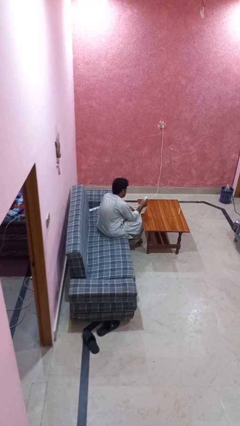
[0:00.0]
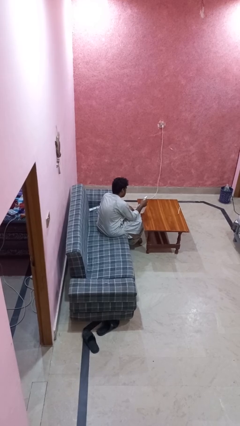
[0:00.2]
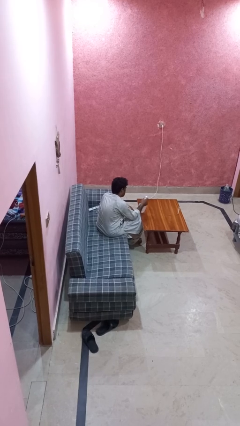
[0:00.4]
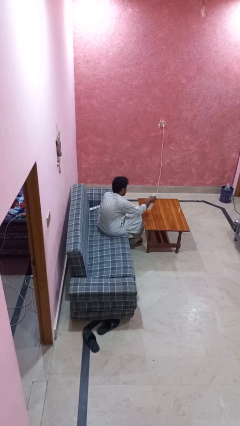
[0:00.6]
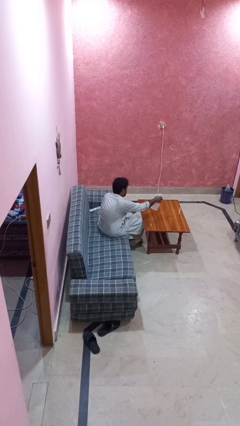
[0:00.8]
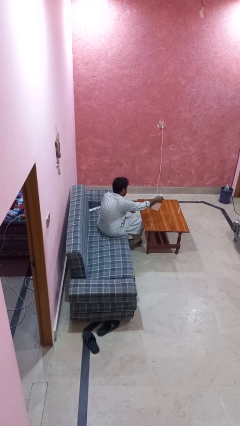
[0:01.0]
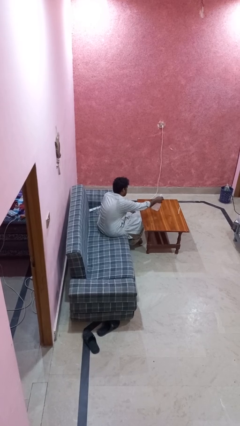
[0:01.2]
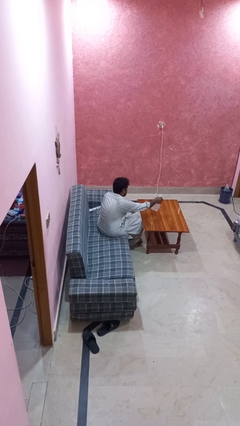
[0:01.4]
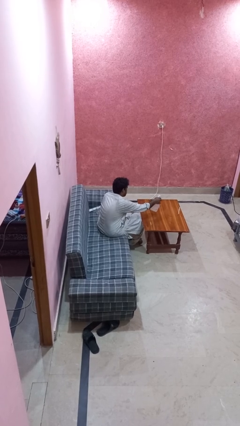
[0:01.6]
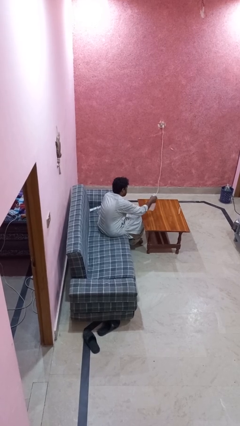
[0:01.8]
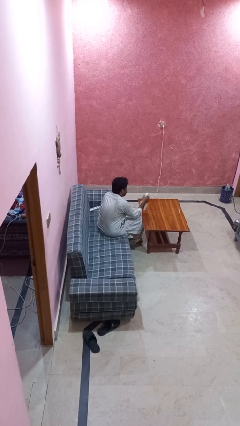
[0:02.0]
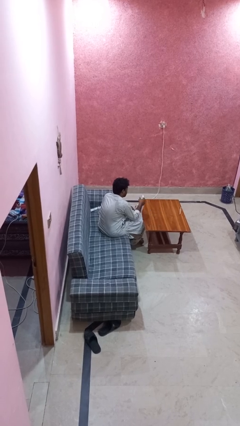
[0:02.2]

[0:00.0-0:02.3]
person sprays from bottle

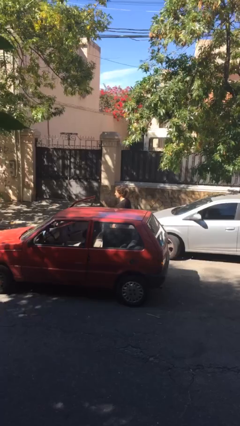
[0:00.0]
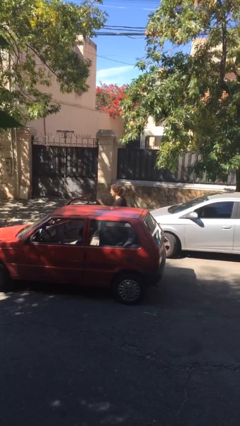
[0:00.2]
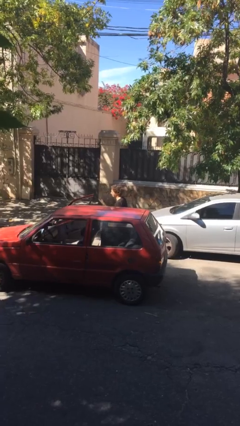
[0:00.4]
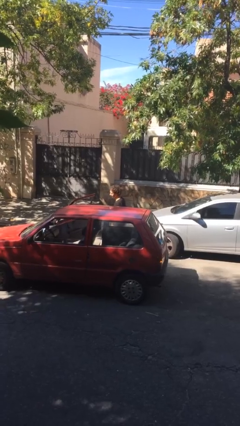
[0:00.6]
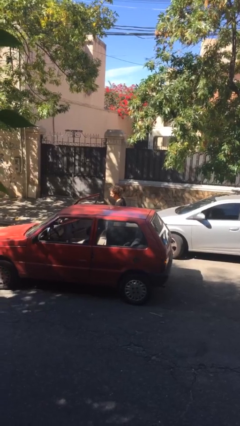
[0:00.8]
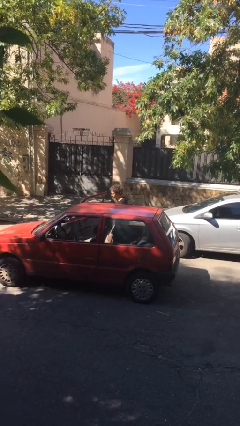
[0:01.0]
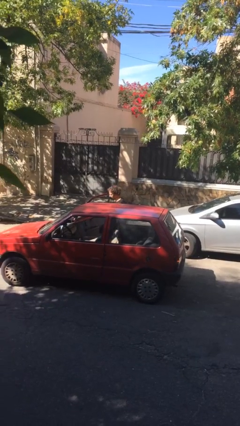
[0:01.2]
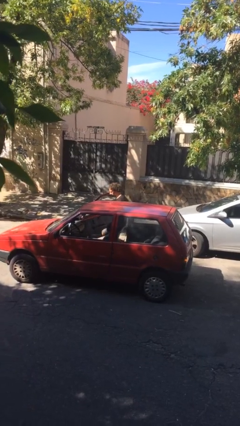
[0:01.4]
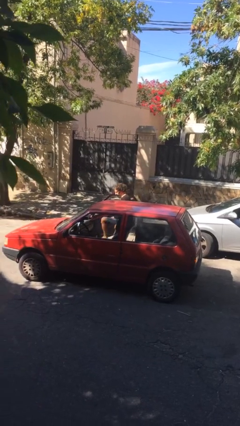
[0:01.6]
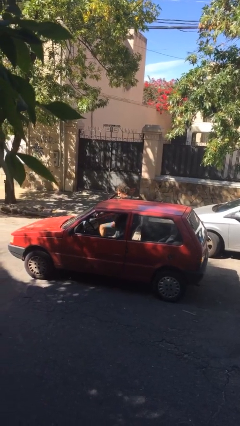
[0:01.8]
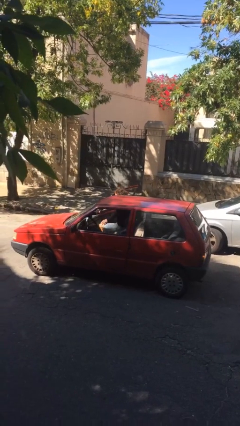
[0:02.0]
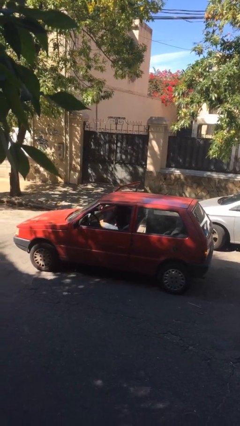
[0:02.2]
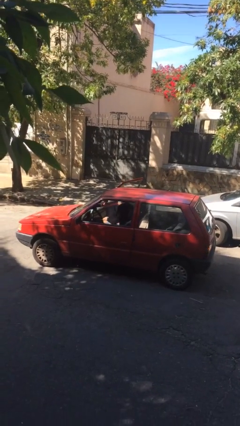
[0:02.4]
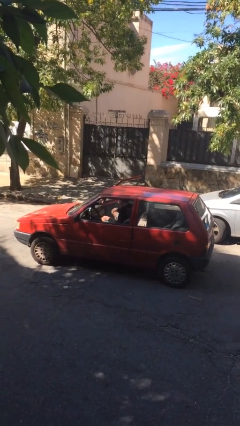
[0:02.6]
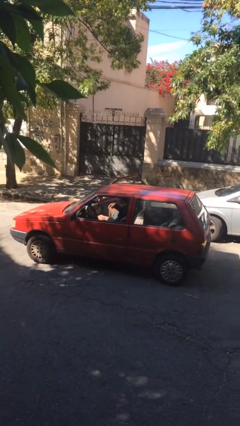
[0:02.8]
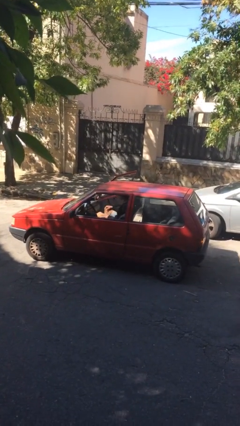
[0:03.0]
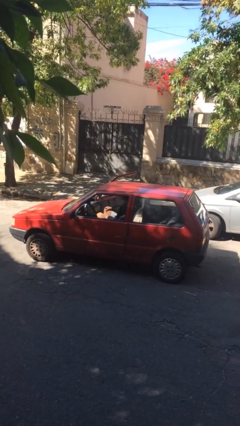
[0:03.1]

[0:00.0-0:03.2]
person enters car

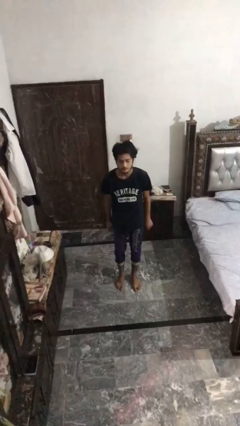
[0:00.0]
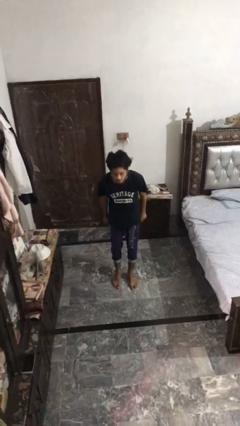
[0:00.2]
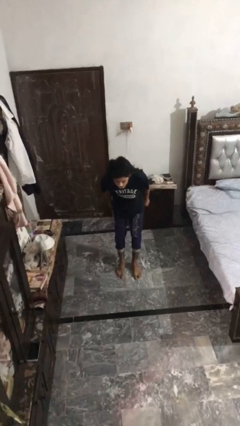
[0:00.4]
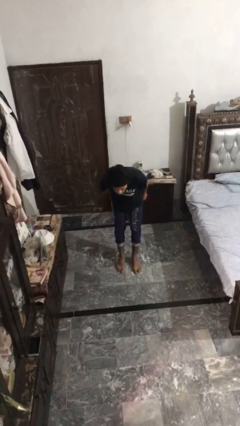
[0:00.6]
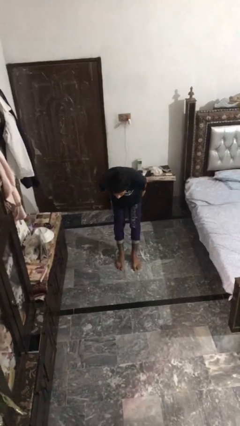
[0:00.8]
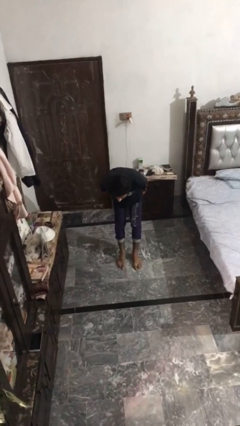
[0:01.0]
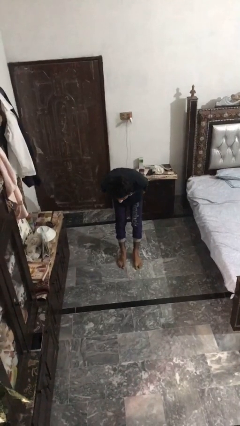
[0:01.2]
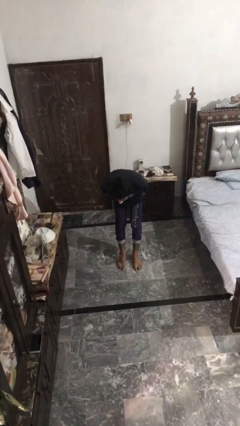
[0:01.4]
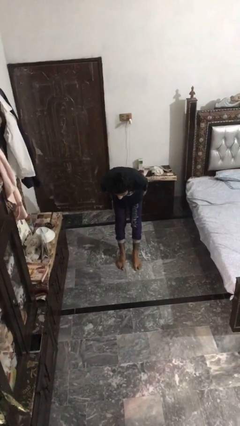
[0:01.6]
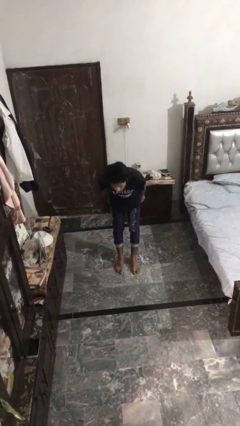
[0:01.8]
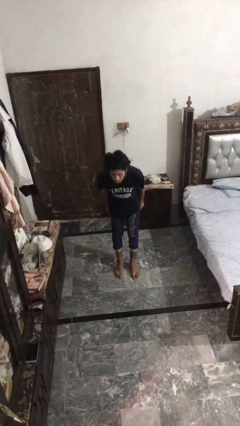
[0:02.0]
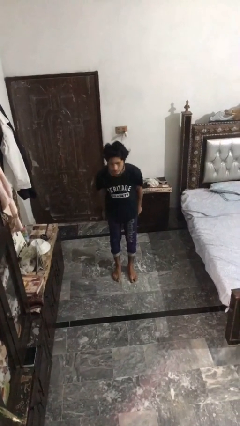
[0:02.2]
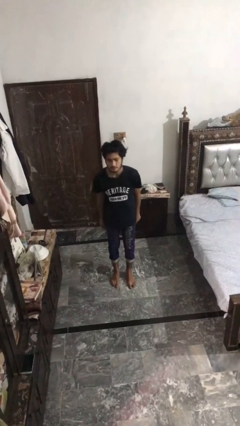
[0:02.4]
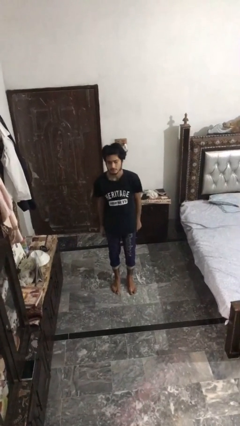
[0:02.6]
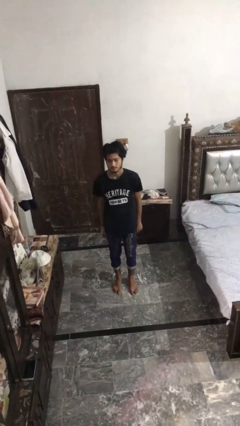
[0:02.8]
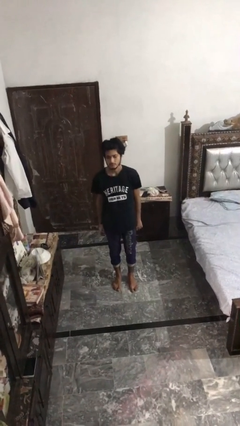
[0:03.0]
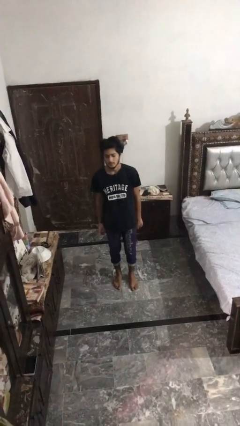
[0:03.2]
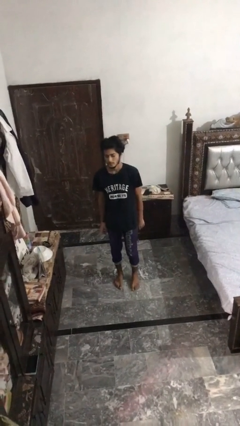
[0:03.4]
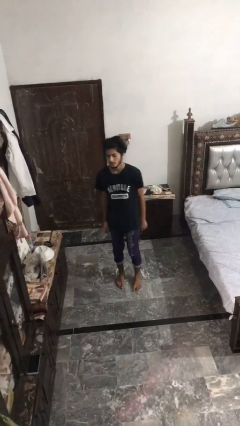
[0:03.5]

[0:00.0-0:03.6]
person bows

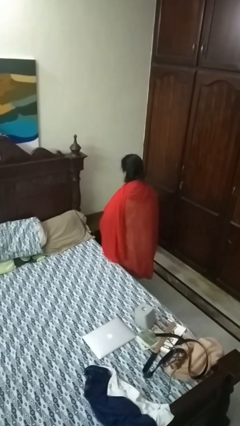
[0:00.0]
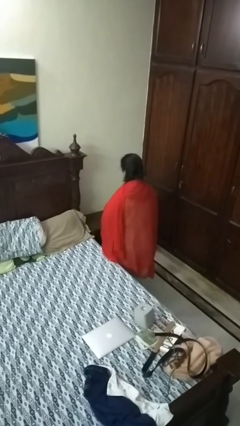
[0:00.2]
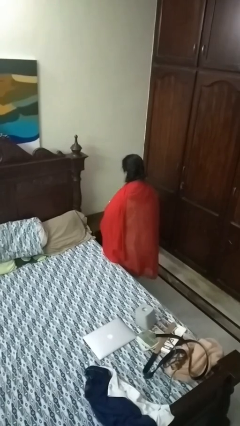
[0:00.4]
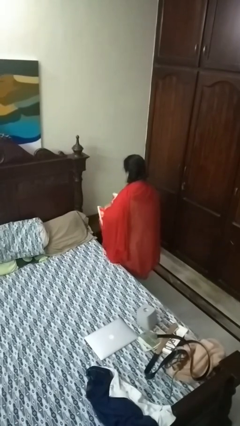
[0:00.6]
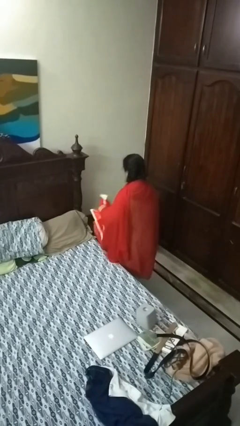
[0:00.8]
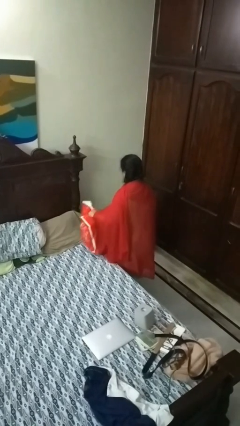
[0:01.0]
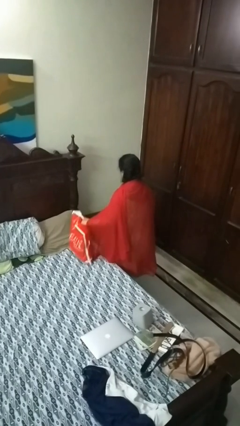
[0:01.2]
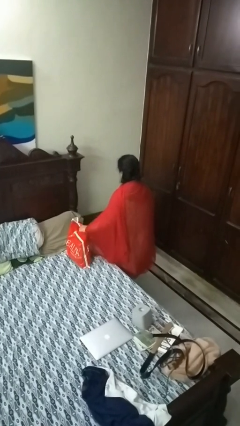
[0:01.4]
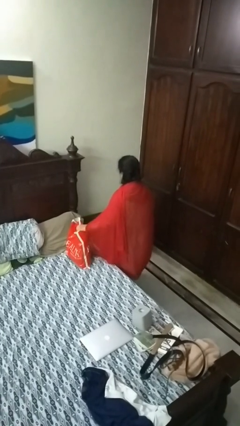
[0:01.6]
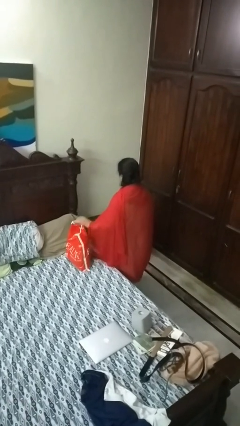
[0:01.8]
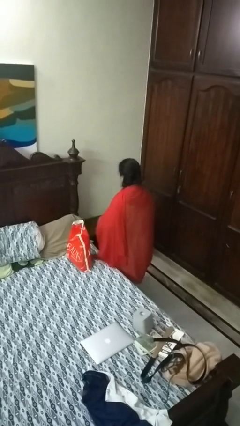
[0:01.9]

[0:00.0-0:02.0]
person puts down object on bed

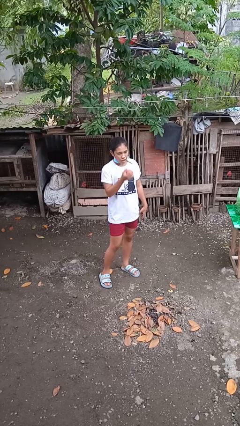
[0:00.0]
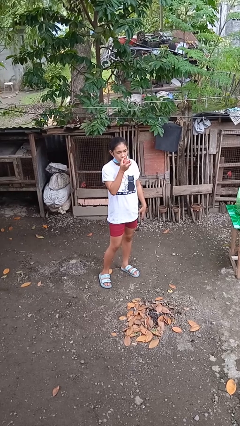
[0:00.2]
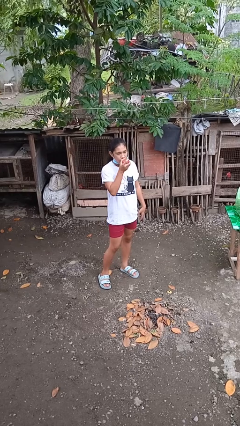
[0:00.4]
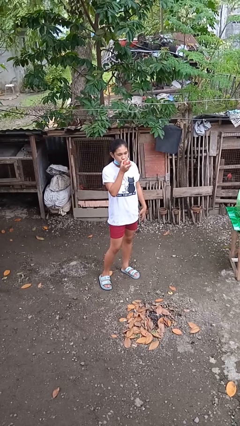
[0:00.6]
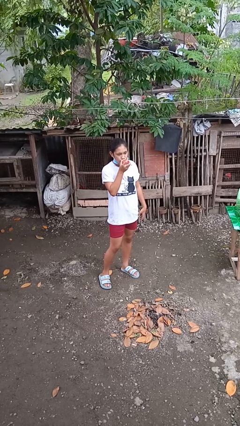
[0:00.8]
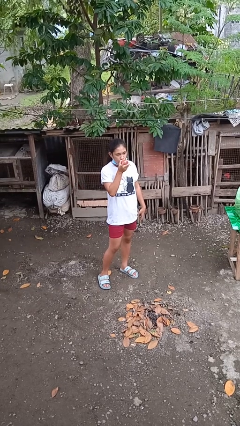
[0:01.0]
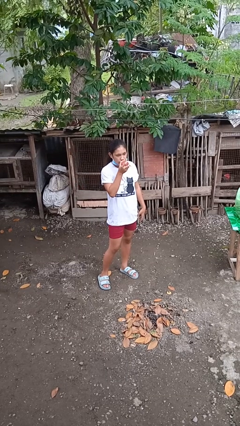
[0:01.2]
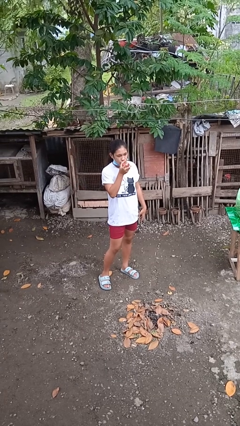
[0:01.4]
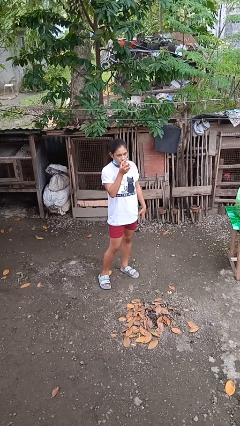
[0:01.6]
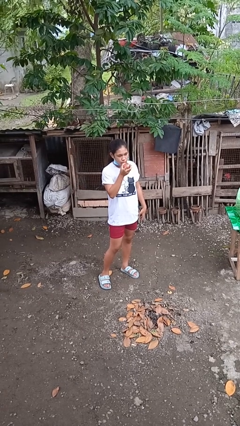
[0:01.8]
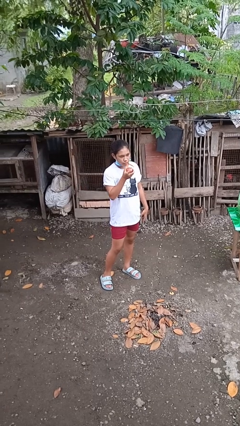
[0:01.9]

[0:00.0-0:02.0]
person eats apple

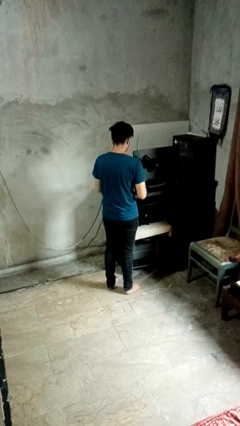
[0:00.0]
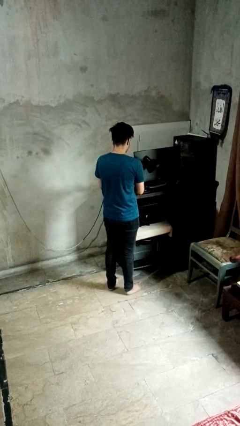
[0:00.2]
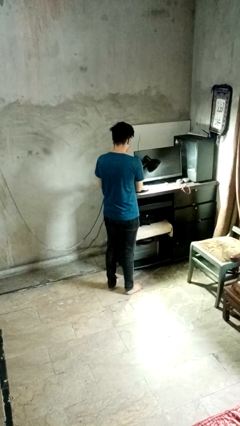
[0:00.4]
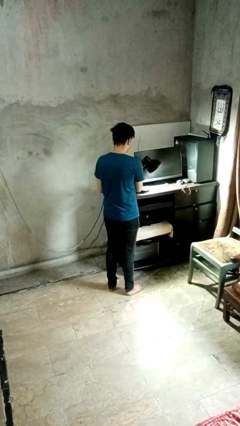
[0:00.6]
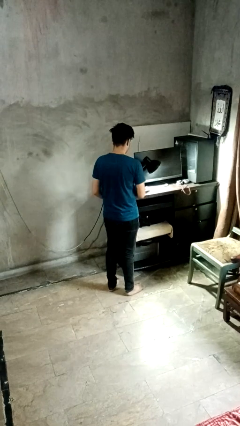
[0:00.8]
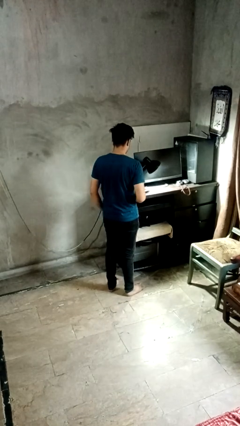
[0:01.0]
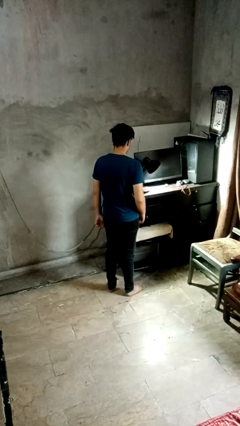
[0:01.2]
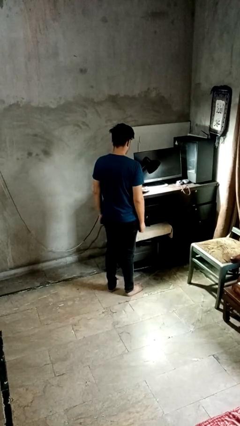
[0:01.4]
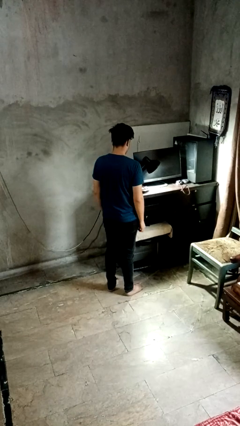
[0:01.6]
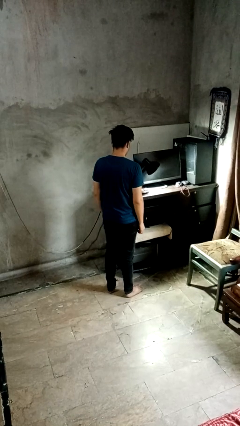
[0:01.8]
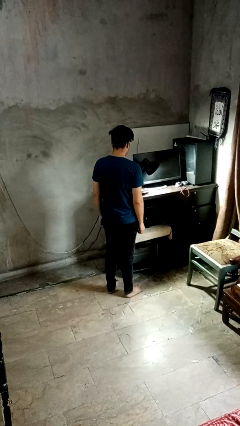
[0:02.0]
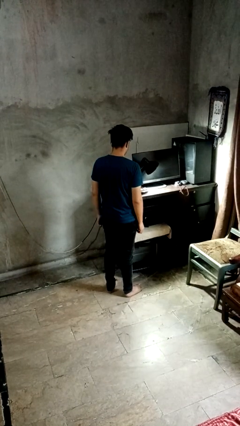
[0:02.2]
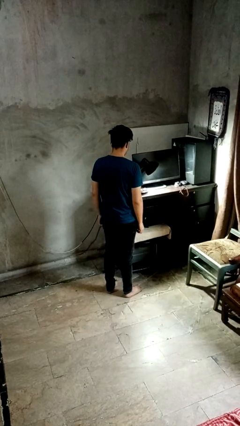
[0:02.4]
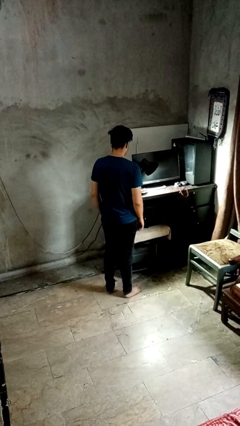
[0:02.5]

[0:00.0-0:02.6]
person turns on lamp

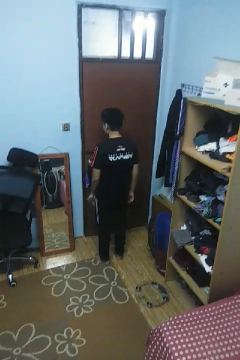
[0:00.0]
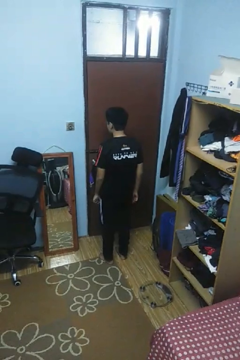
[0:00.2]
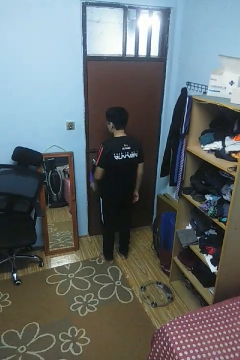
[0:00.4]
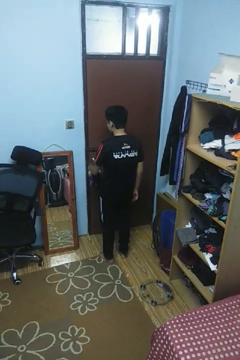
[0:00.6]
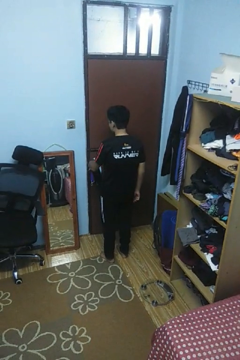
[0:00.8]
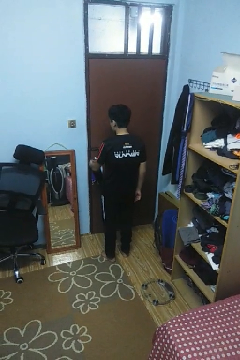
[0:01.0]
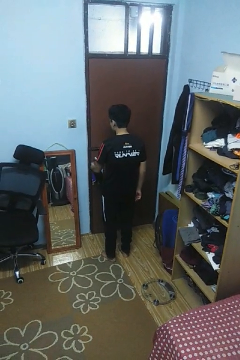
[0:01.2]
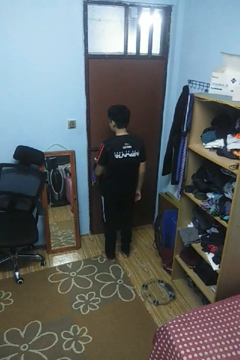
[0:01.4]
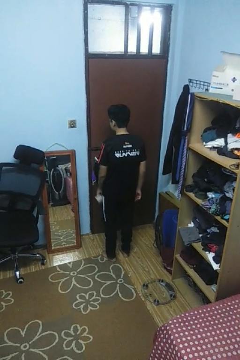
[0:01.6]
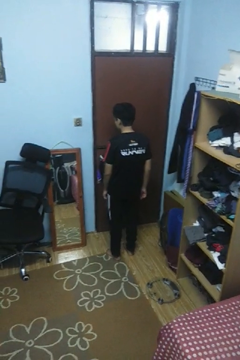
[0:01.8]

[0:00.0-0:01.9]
person locks door with keys

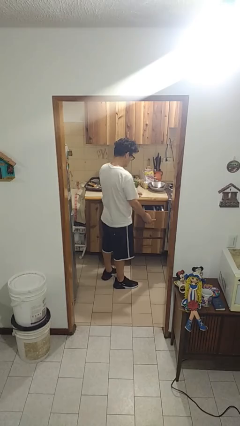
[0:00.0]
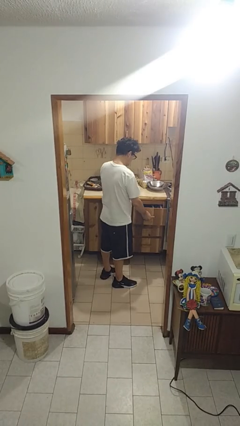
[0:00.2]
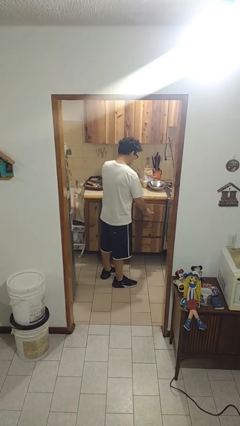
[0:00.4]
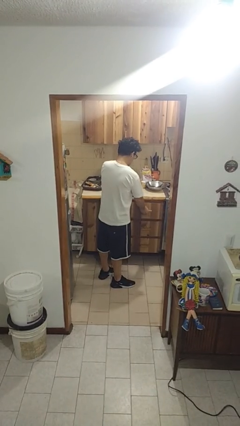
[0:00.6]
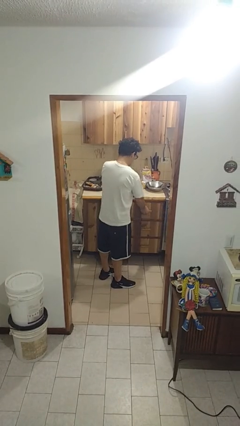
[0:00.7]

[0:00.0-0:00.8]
person closes kitchen drawer
